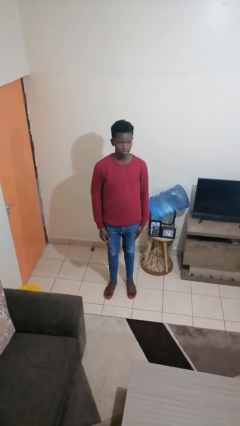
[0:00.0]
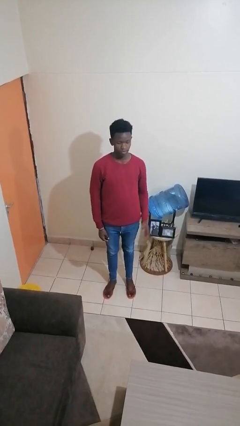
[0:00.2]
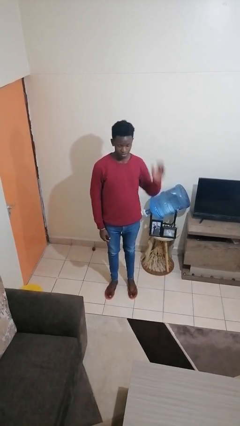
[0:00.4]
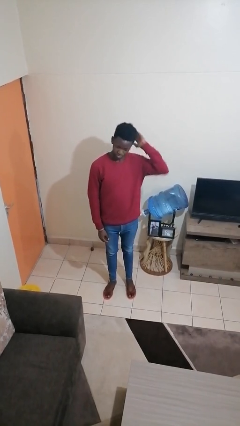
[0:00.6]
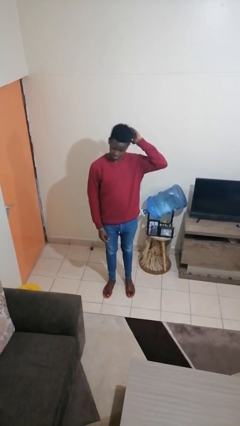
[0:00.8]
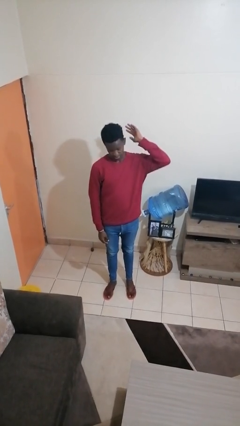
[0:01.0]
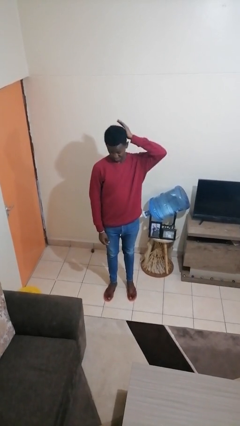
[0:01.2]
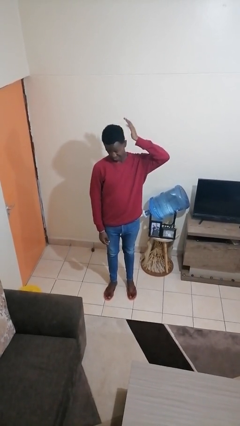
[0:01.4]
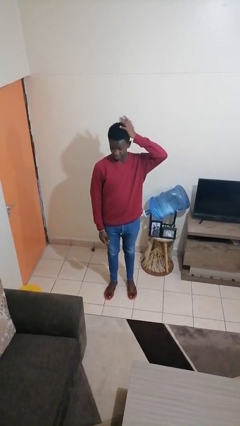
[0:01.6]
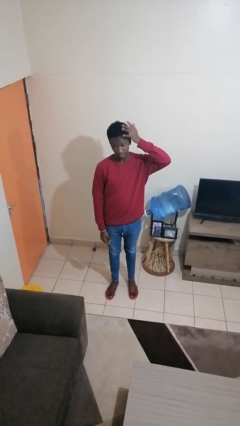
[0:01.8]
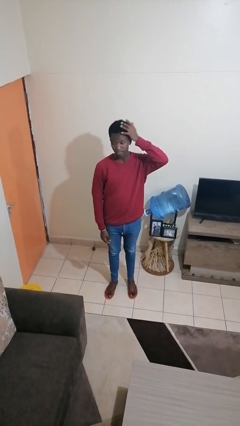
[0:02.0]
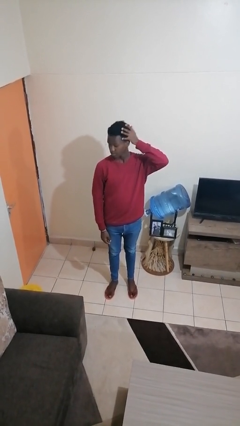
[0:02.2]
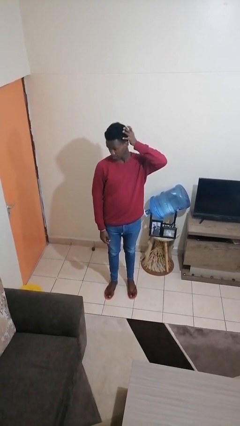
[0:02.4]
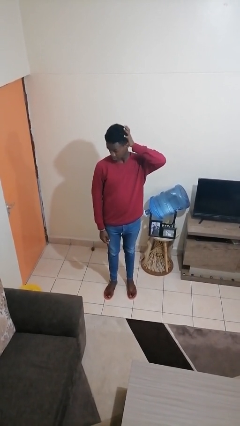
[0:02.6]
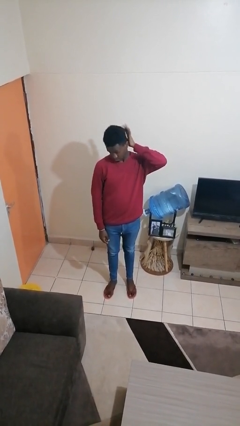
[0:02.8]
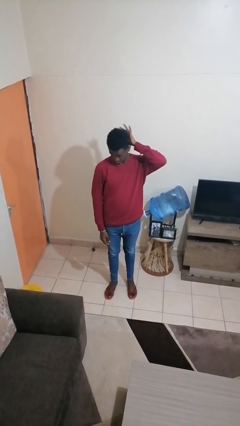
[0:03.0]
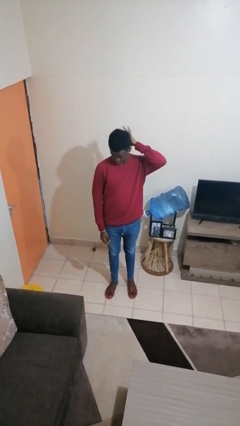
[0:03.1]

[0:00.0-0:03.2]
person pats head

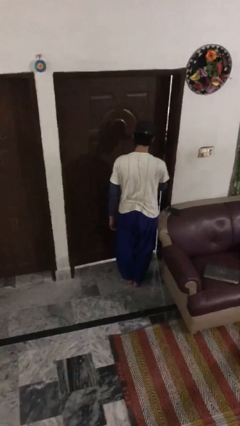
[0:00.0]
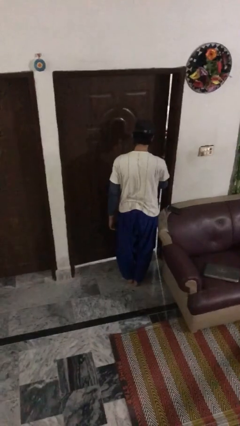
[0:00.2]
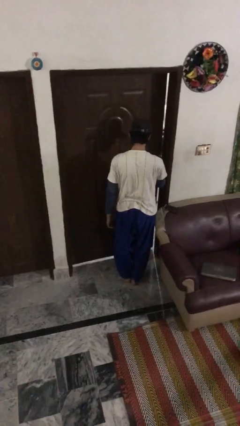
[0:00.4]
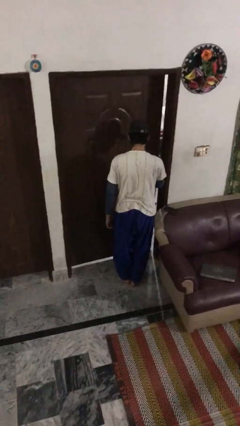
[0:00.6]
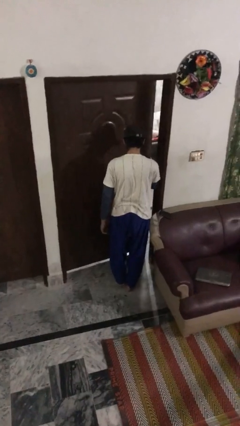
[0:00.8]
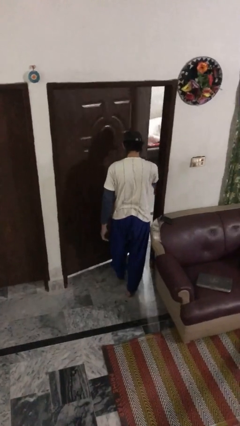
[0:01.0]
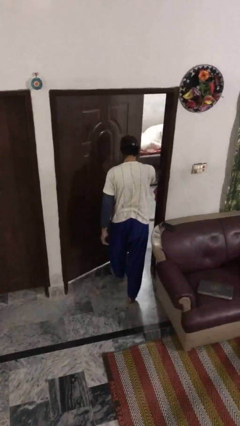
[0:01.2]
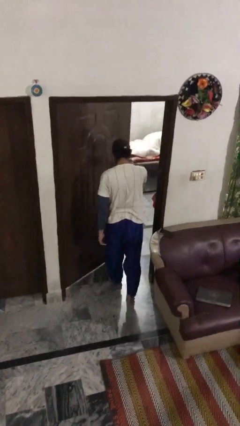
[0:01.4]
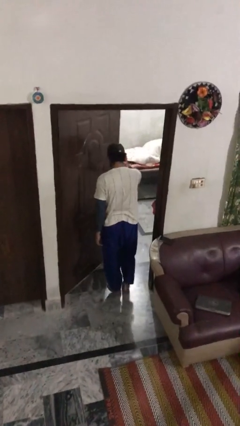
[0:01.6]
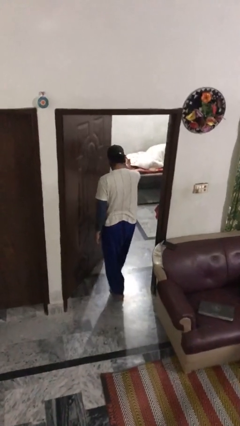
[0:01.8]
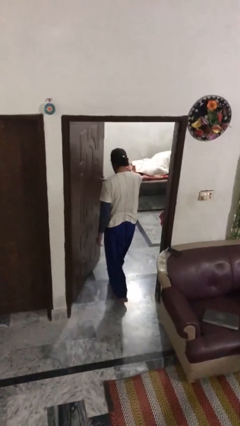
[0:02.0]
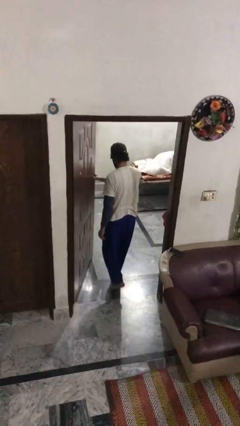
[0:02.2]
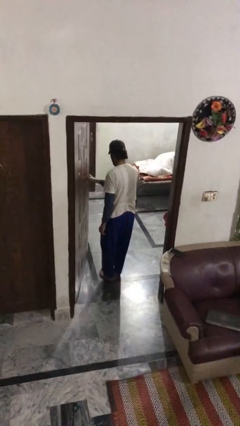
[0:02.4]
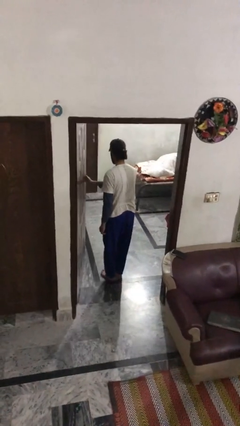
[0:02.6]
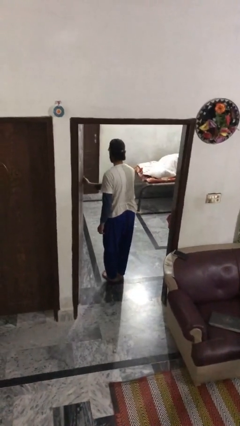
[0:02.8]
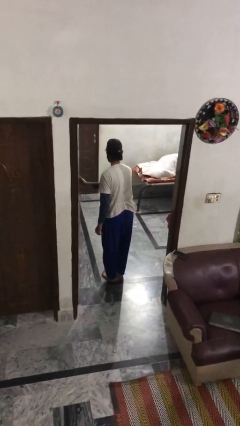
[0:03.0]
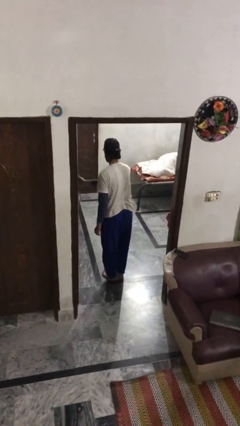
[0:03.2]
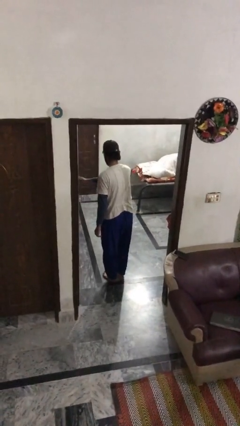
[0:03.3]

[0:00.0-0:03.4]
person opens facility door

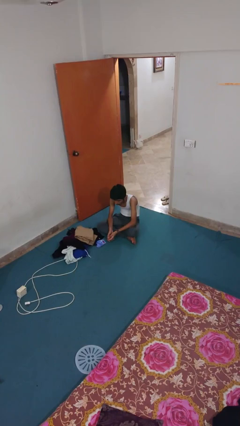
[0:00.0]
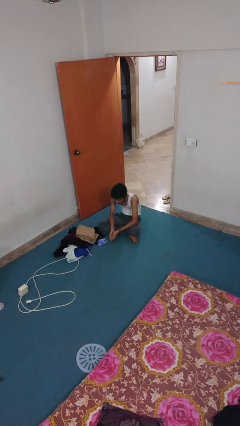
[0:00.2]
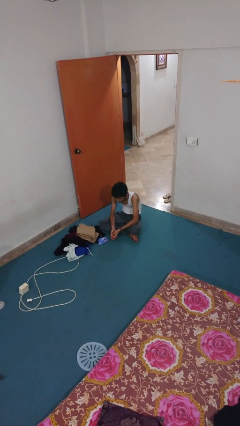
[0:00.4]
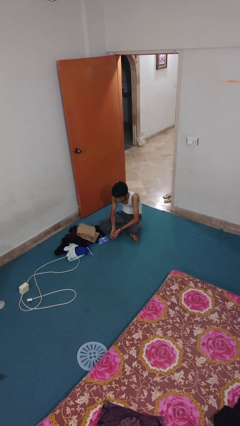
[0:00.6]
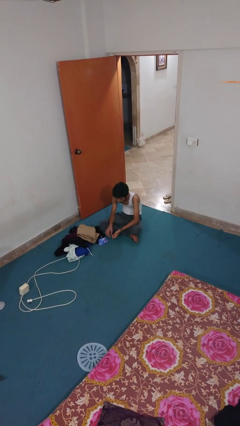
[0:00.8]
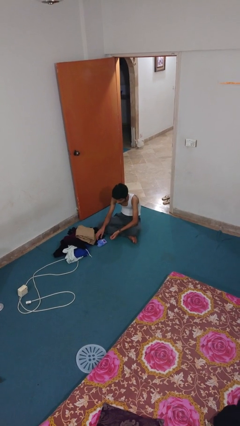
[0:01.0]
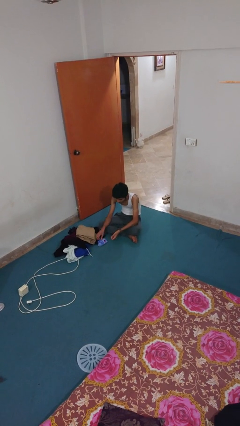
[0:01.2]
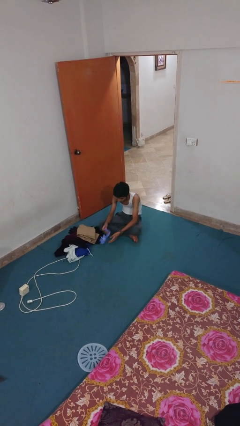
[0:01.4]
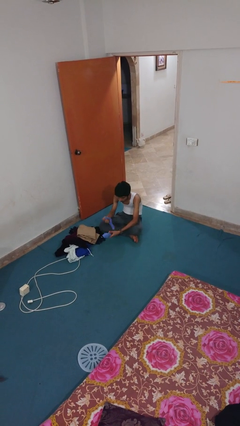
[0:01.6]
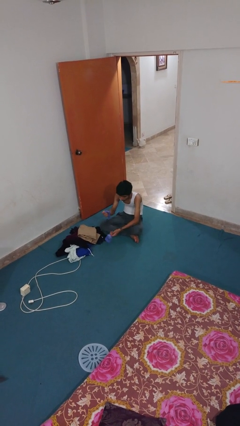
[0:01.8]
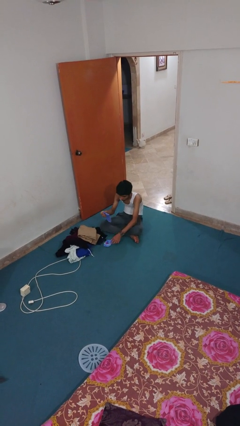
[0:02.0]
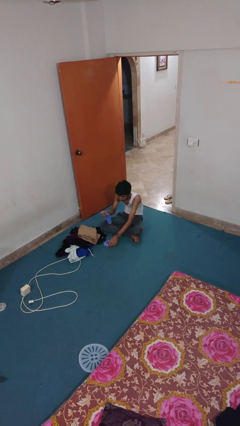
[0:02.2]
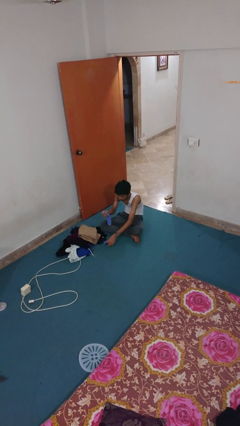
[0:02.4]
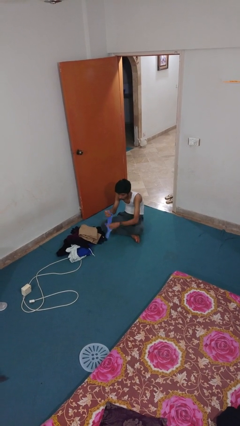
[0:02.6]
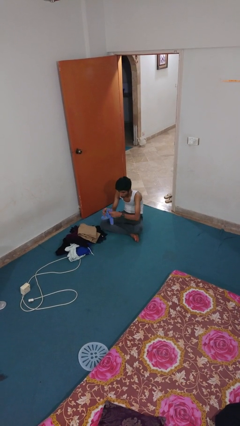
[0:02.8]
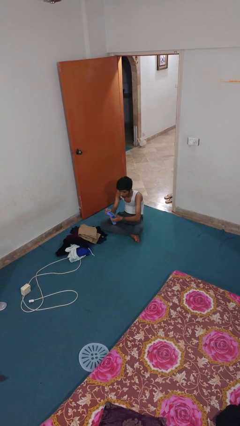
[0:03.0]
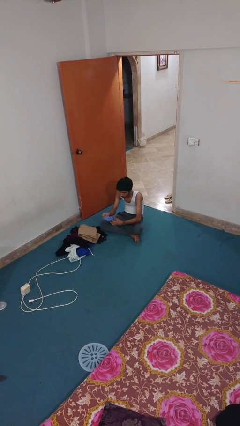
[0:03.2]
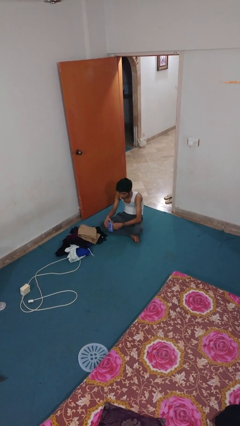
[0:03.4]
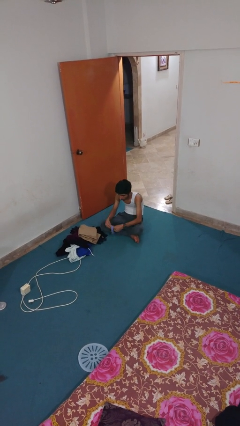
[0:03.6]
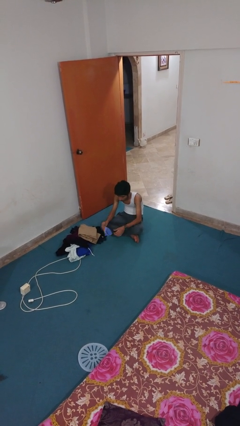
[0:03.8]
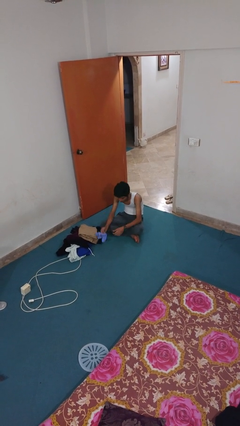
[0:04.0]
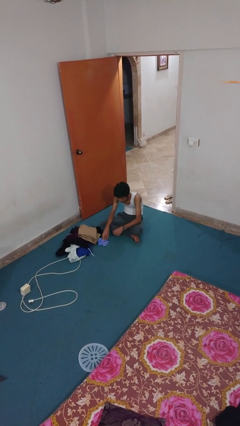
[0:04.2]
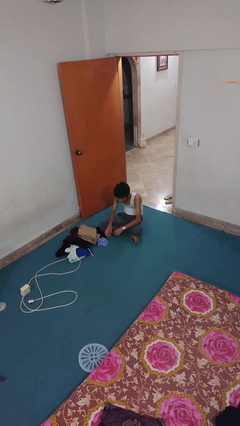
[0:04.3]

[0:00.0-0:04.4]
person folds socks

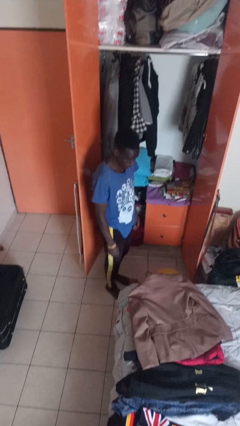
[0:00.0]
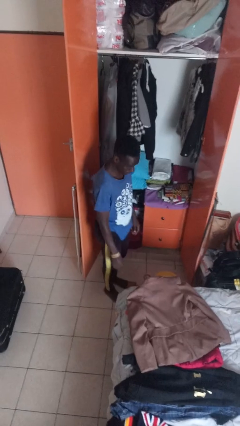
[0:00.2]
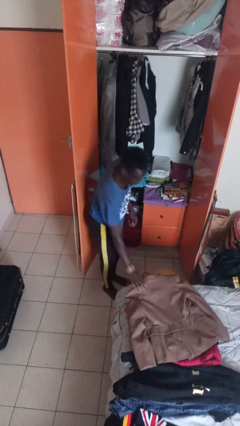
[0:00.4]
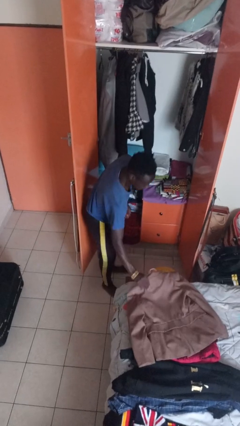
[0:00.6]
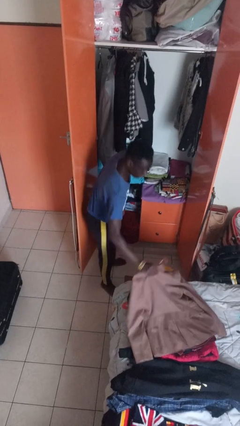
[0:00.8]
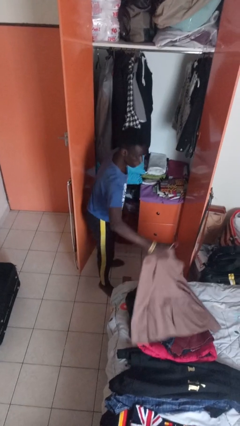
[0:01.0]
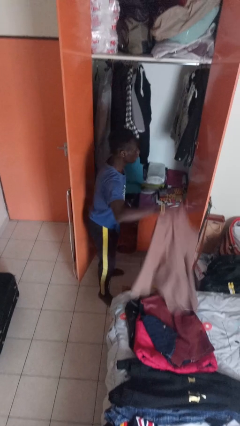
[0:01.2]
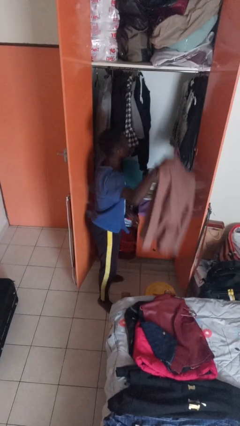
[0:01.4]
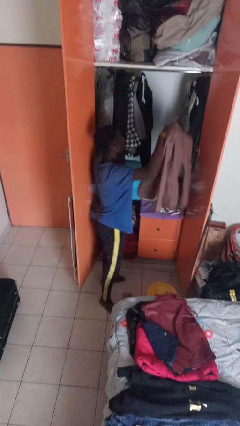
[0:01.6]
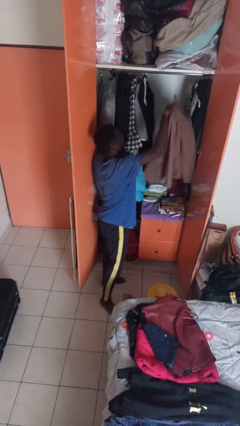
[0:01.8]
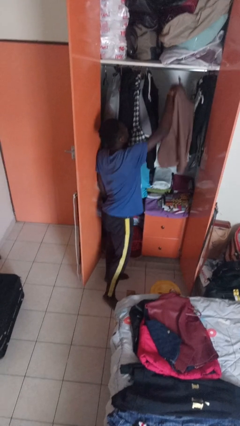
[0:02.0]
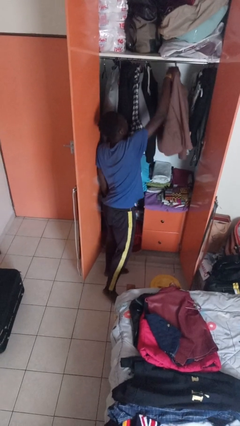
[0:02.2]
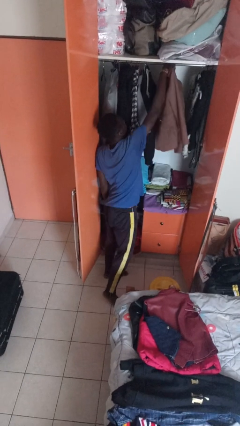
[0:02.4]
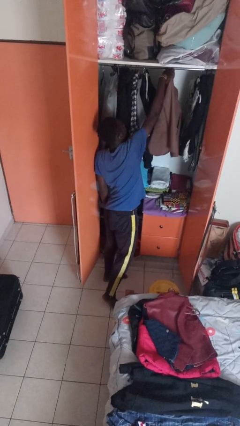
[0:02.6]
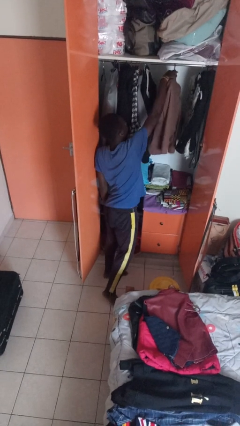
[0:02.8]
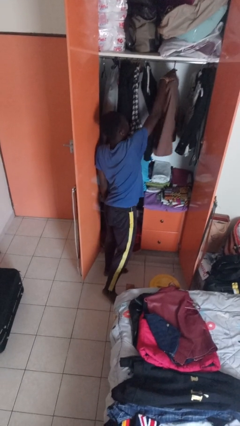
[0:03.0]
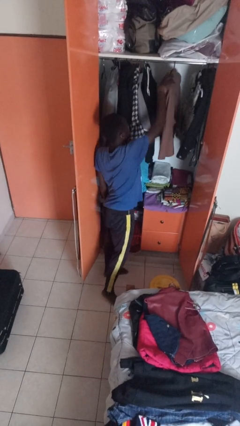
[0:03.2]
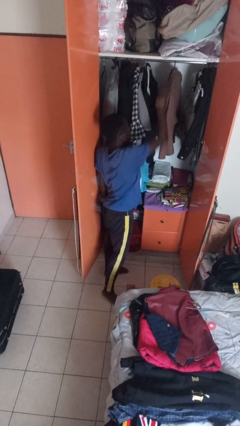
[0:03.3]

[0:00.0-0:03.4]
person puts clothes into closet

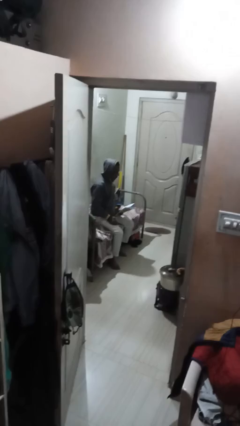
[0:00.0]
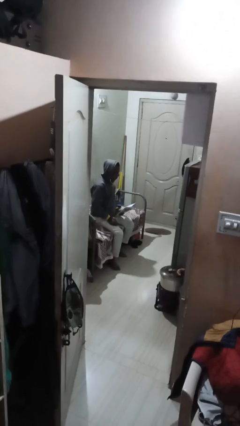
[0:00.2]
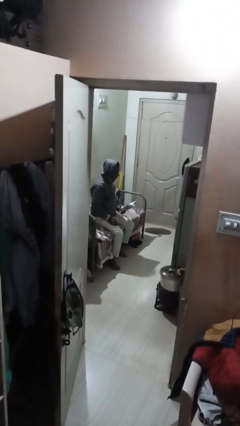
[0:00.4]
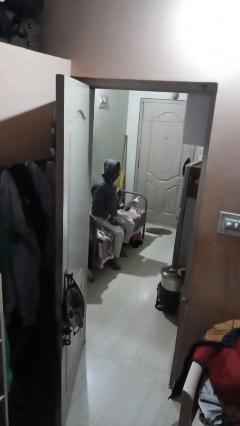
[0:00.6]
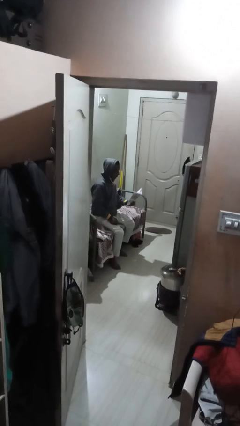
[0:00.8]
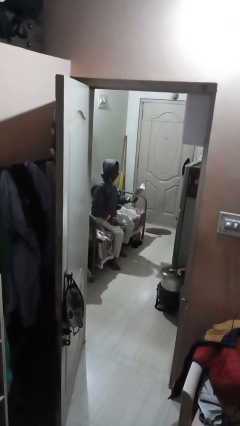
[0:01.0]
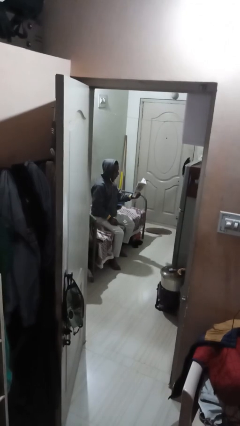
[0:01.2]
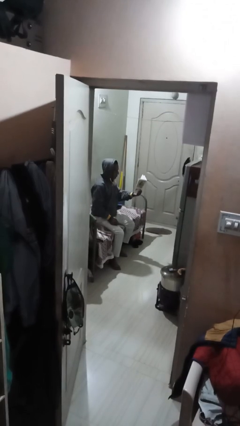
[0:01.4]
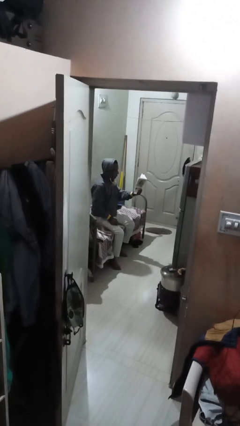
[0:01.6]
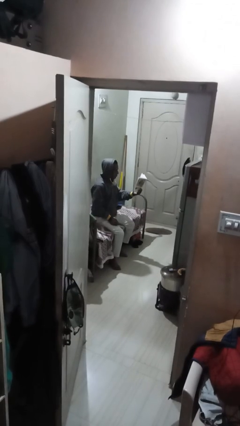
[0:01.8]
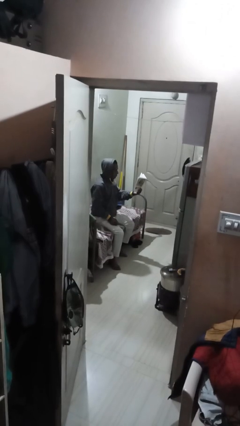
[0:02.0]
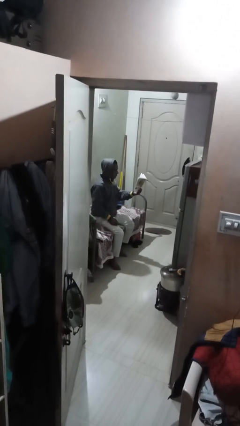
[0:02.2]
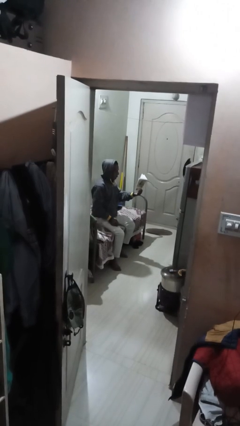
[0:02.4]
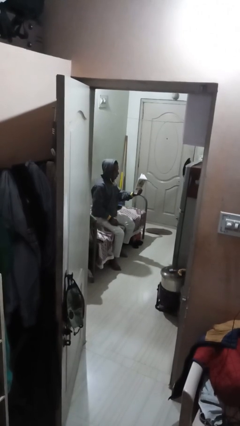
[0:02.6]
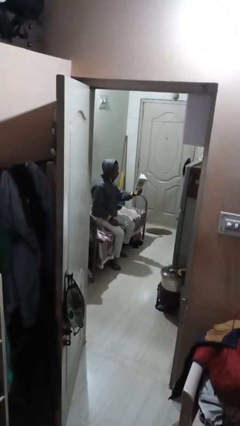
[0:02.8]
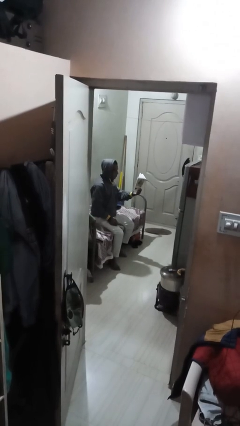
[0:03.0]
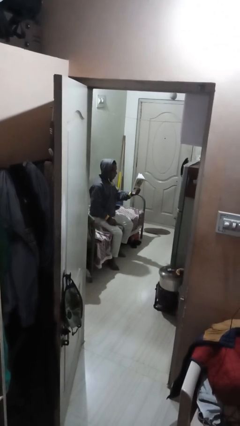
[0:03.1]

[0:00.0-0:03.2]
person reads document

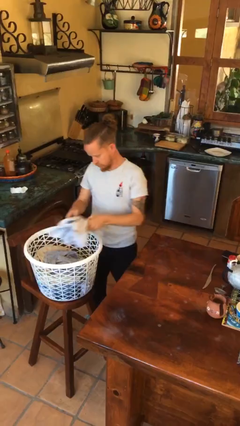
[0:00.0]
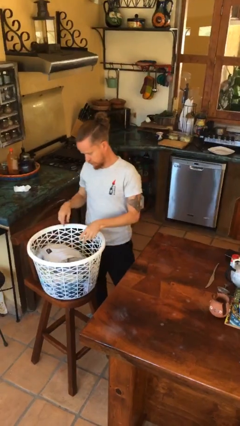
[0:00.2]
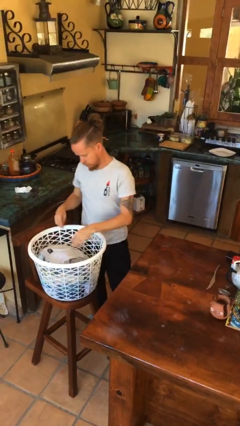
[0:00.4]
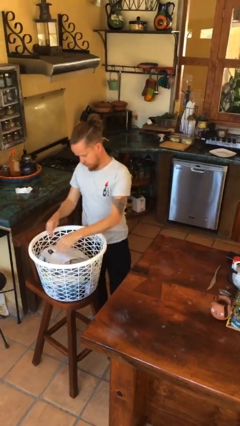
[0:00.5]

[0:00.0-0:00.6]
person folds shirt
